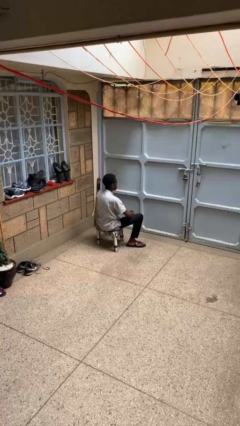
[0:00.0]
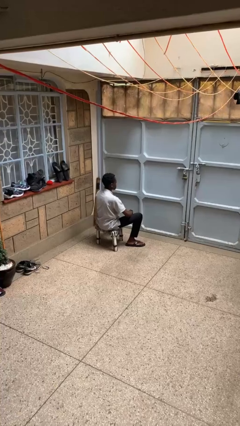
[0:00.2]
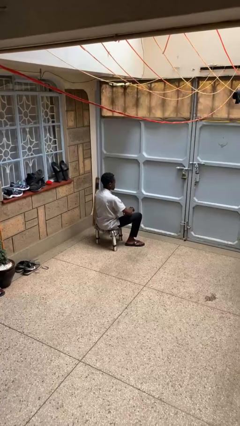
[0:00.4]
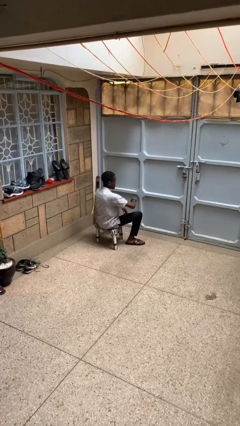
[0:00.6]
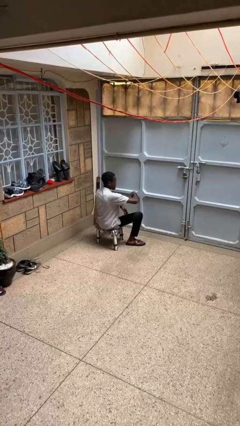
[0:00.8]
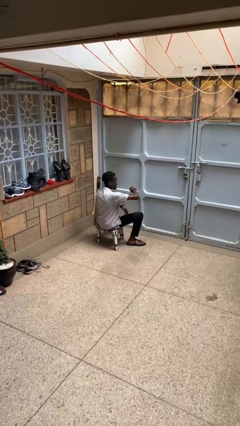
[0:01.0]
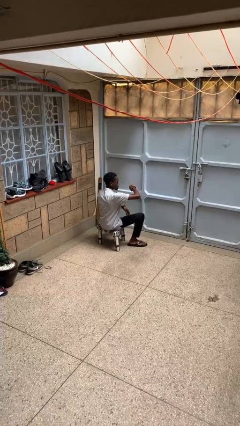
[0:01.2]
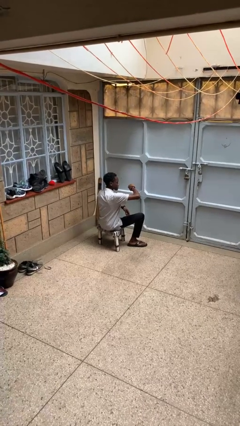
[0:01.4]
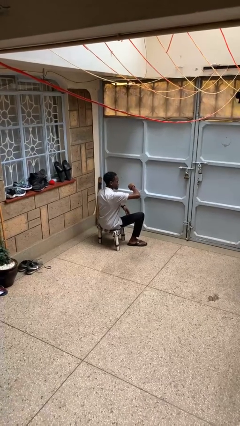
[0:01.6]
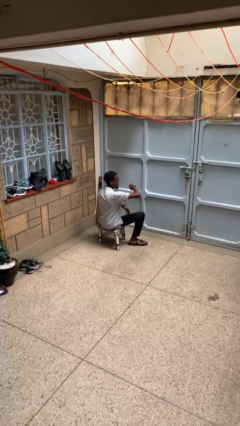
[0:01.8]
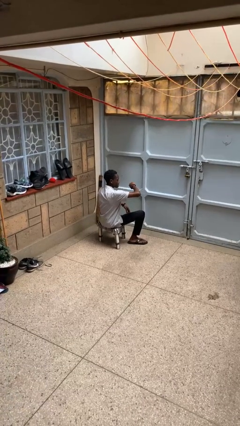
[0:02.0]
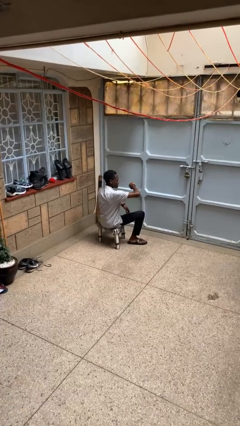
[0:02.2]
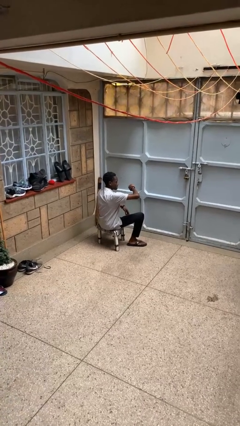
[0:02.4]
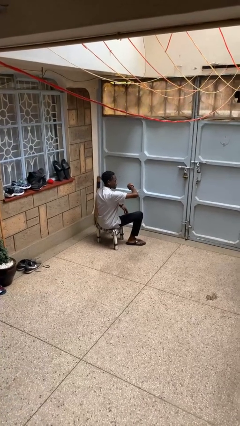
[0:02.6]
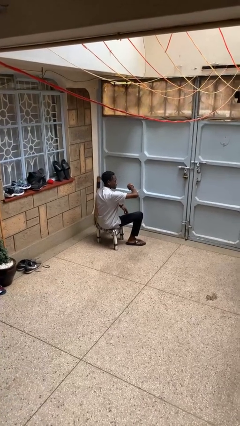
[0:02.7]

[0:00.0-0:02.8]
person looks at wristwatch

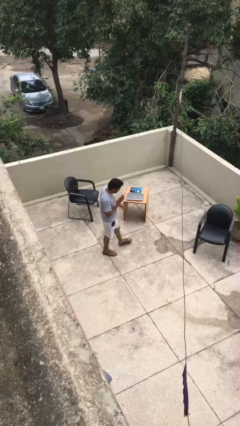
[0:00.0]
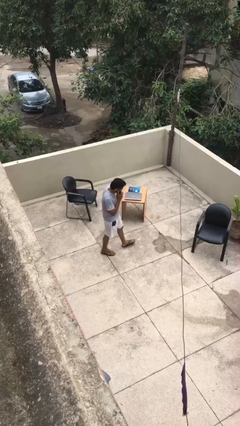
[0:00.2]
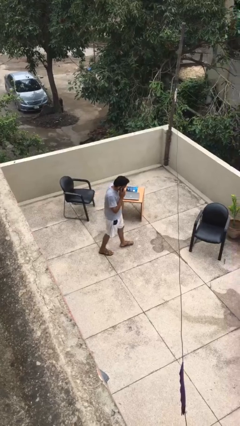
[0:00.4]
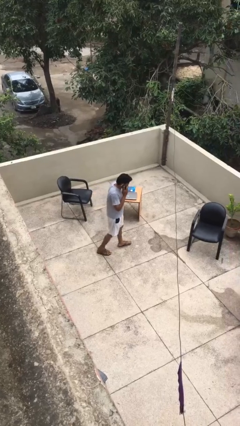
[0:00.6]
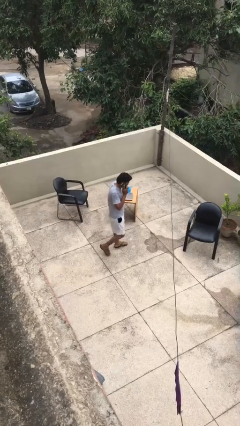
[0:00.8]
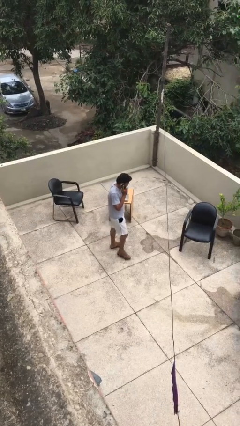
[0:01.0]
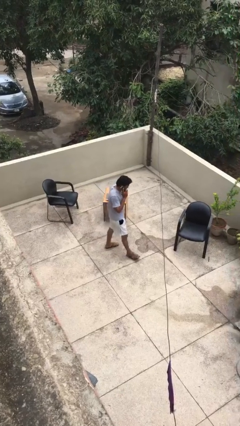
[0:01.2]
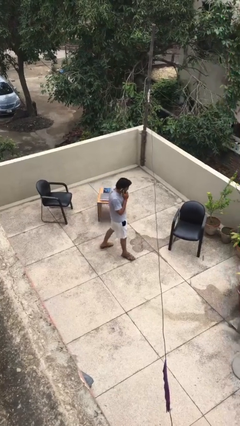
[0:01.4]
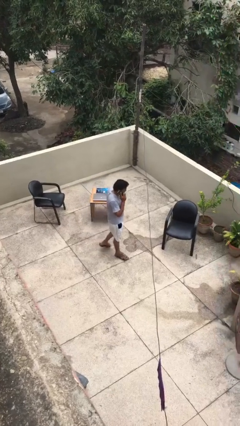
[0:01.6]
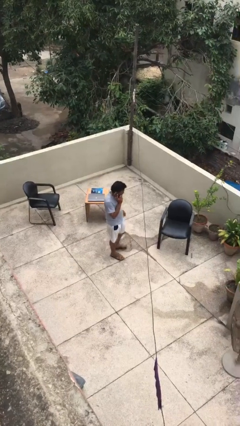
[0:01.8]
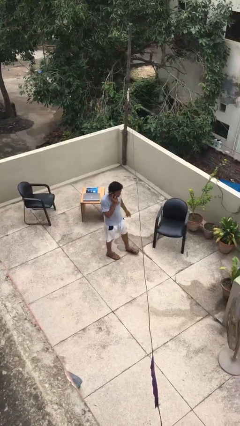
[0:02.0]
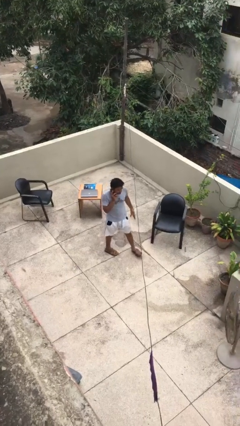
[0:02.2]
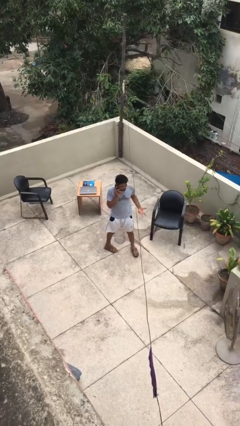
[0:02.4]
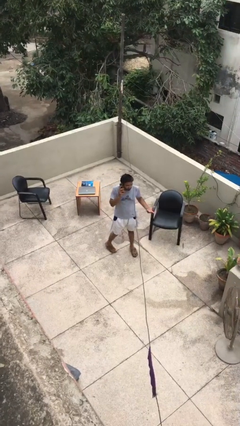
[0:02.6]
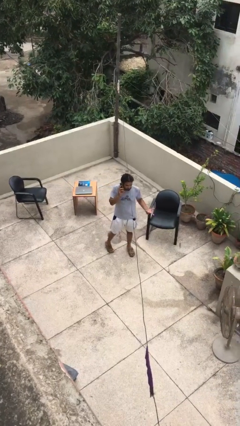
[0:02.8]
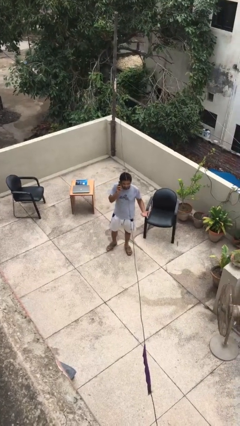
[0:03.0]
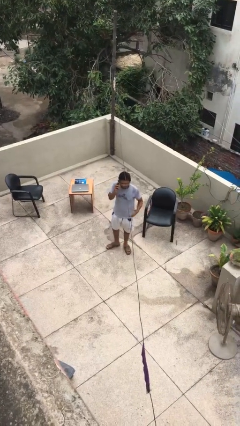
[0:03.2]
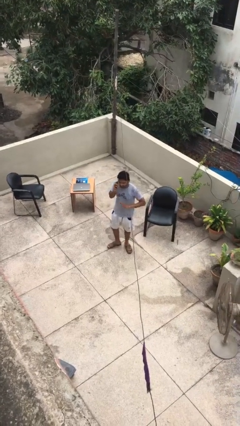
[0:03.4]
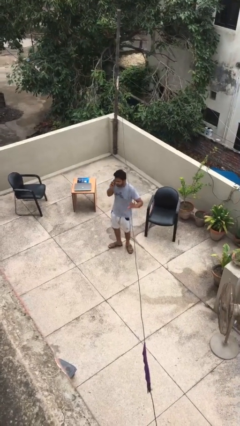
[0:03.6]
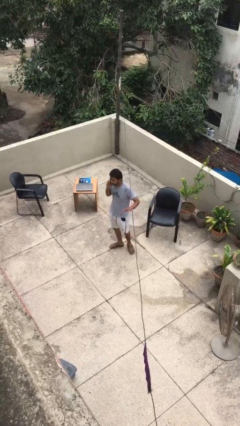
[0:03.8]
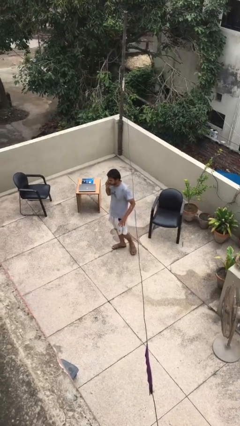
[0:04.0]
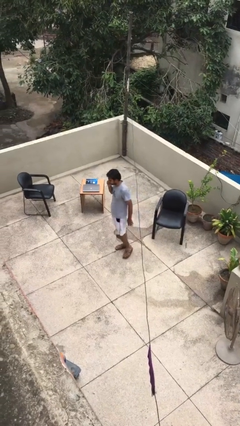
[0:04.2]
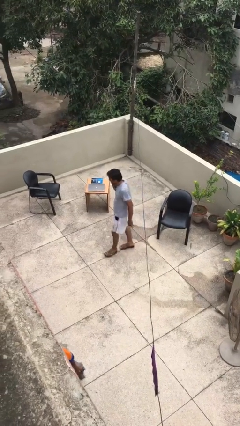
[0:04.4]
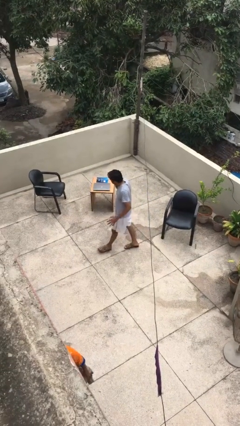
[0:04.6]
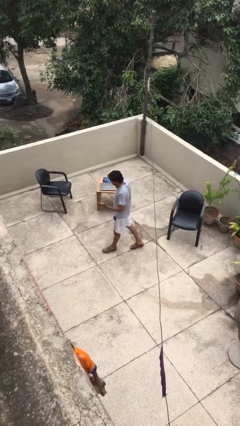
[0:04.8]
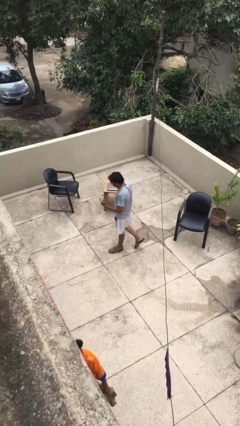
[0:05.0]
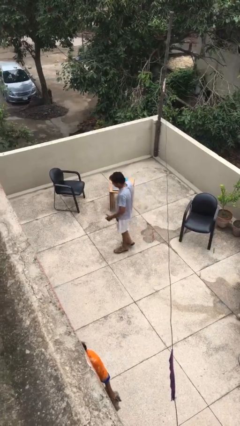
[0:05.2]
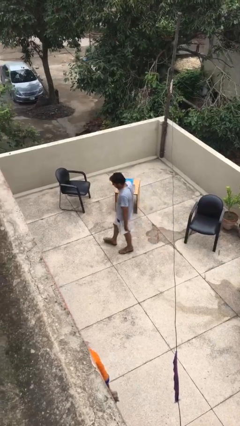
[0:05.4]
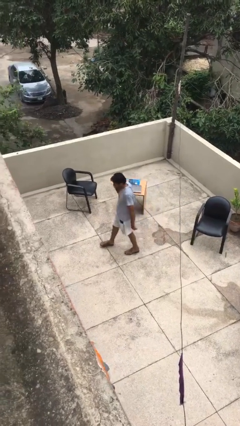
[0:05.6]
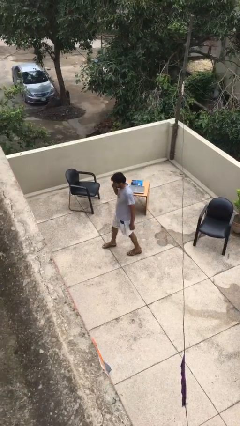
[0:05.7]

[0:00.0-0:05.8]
person talks on phone

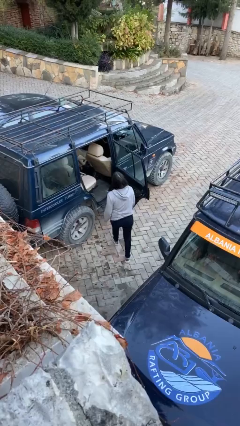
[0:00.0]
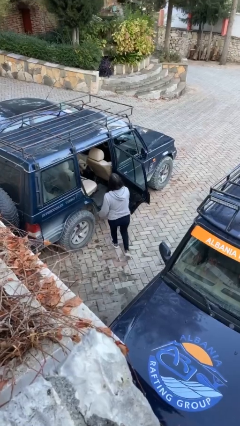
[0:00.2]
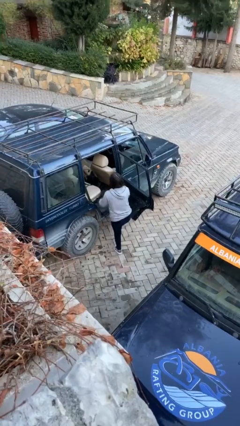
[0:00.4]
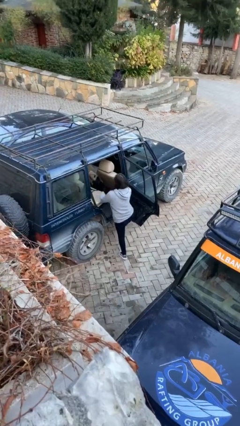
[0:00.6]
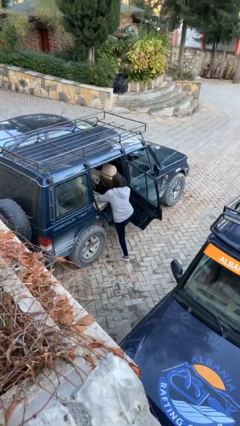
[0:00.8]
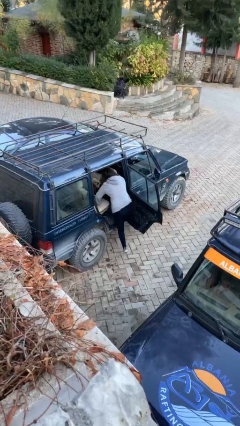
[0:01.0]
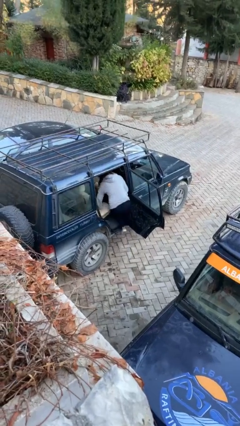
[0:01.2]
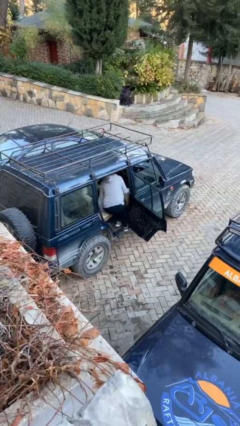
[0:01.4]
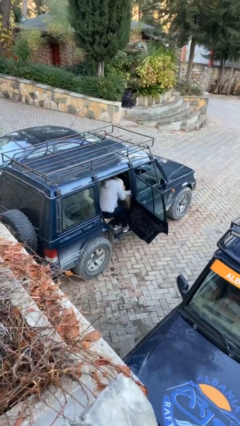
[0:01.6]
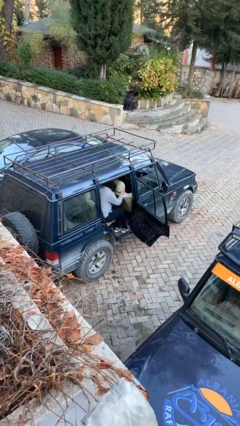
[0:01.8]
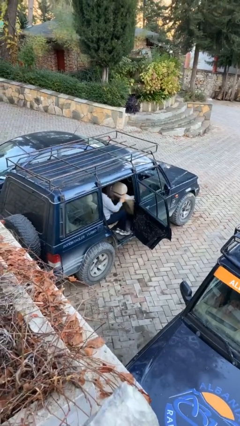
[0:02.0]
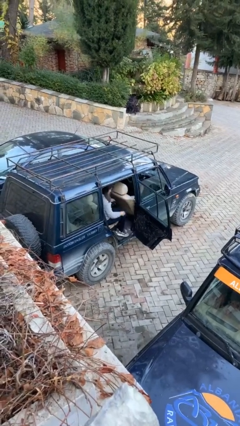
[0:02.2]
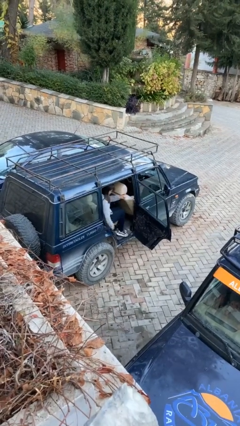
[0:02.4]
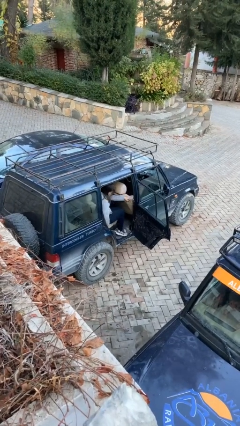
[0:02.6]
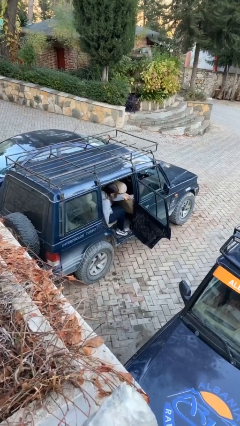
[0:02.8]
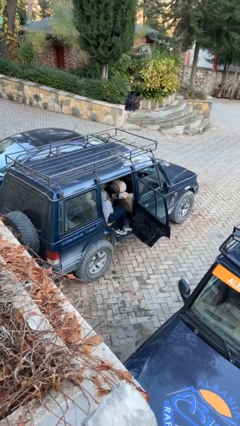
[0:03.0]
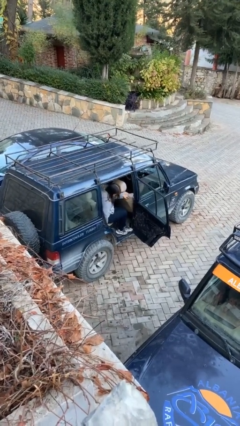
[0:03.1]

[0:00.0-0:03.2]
person enters car

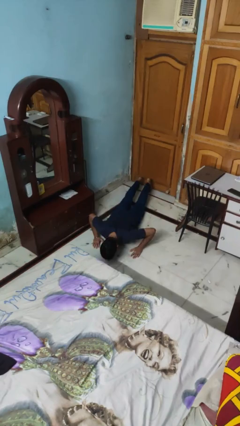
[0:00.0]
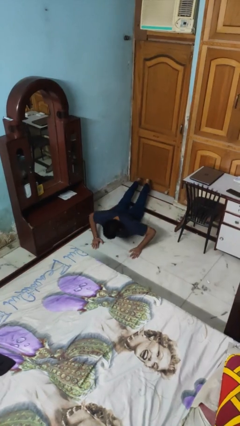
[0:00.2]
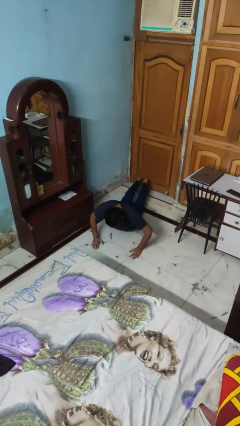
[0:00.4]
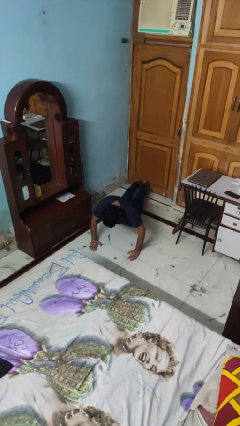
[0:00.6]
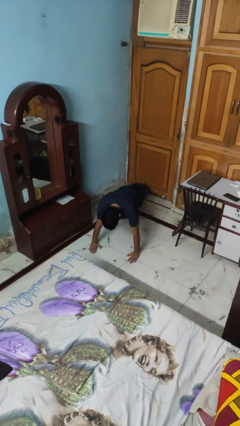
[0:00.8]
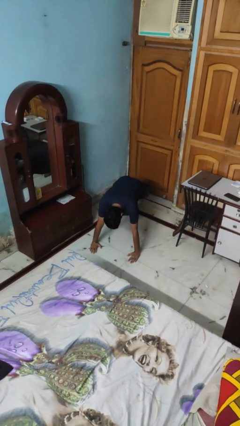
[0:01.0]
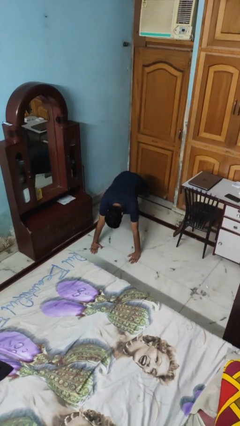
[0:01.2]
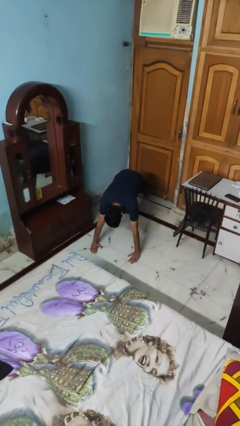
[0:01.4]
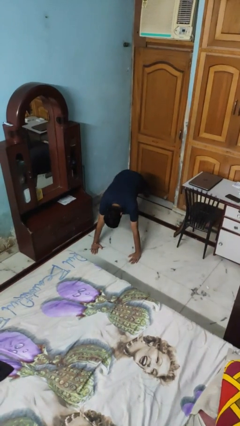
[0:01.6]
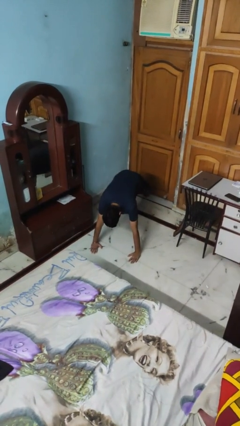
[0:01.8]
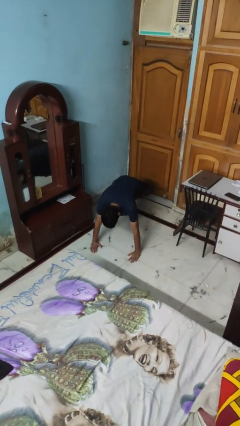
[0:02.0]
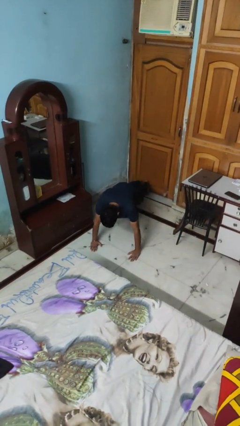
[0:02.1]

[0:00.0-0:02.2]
person exercises with pushup

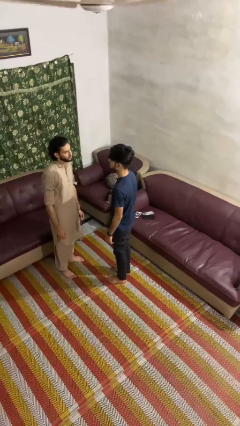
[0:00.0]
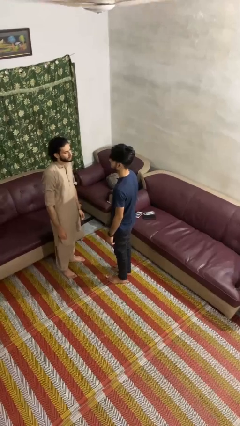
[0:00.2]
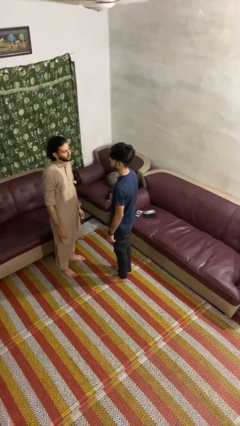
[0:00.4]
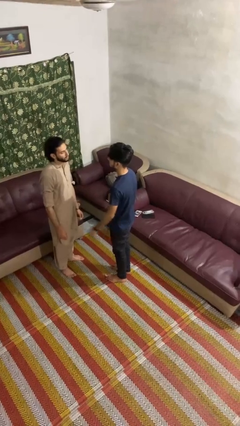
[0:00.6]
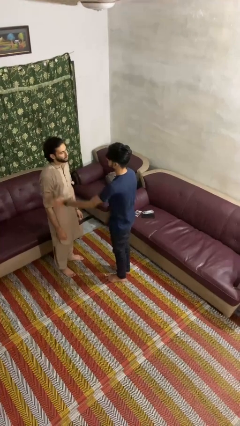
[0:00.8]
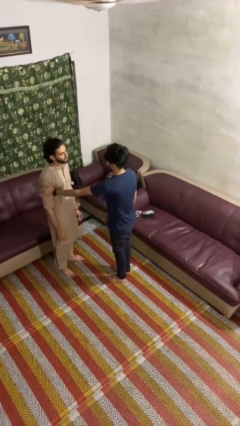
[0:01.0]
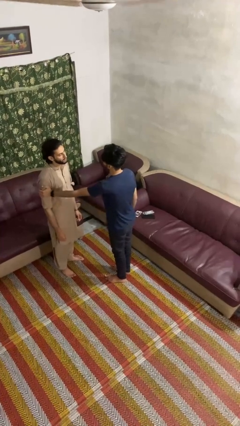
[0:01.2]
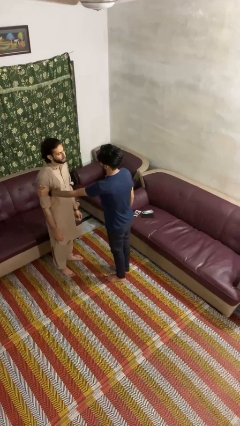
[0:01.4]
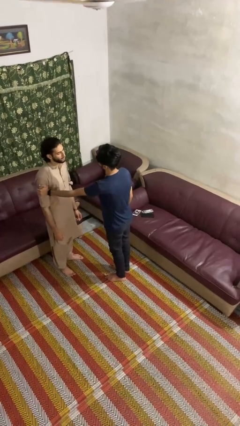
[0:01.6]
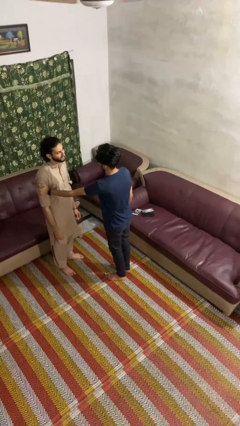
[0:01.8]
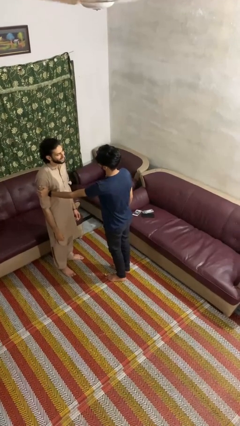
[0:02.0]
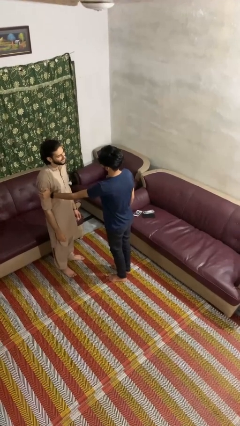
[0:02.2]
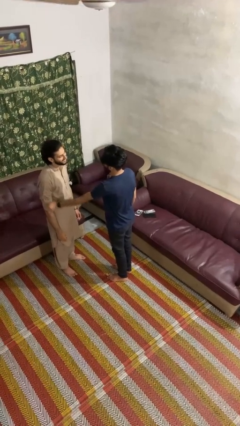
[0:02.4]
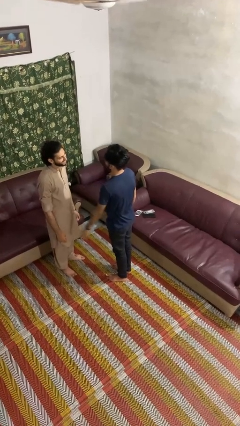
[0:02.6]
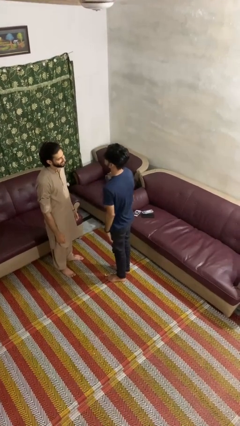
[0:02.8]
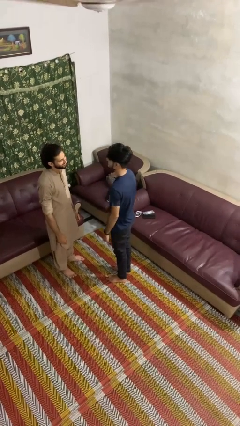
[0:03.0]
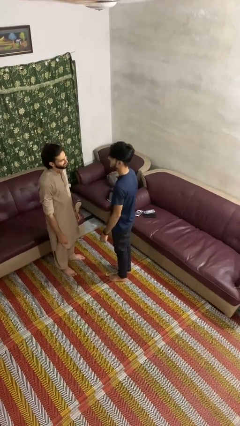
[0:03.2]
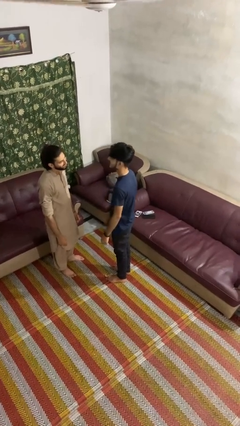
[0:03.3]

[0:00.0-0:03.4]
person grabs person by bicep
